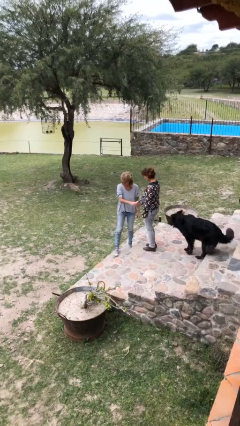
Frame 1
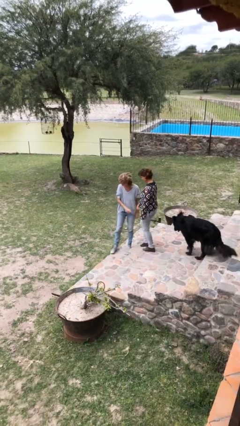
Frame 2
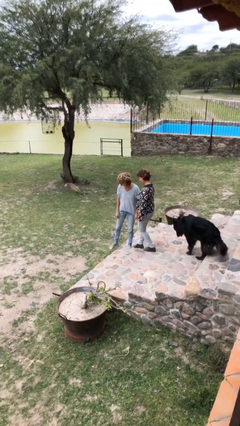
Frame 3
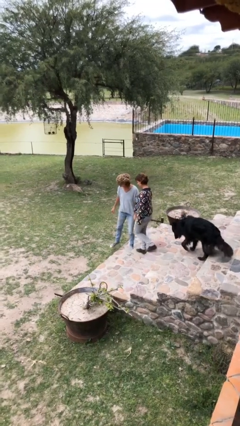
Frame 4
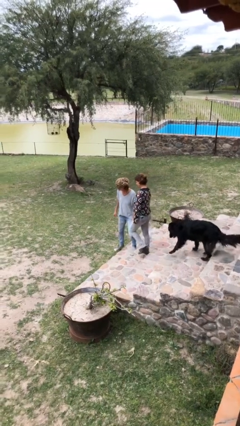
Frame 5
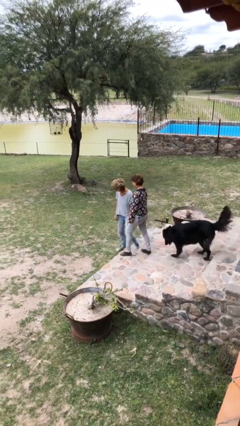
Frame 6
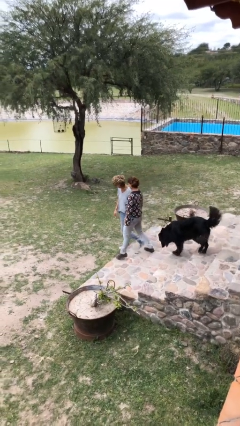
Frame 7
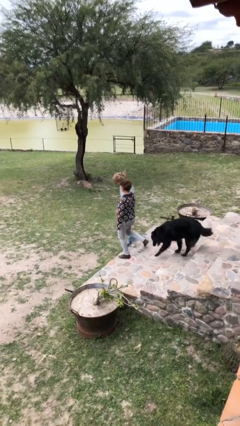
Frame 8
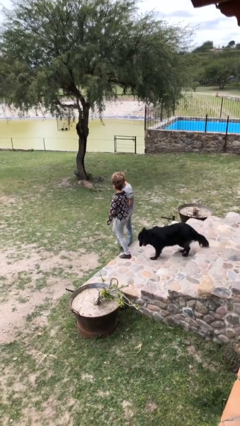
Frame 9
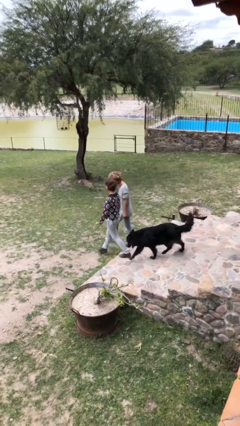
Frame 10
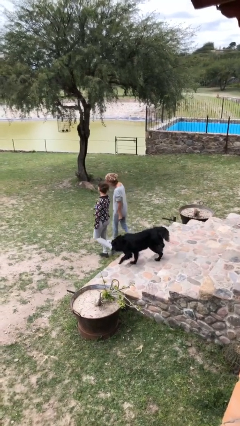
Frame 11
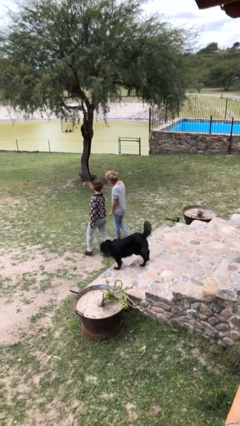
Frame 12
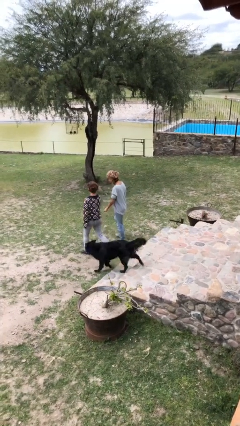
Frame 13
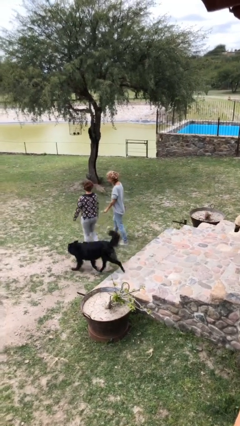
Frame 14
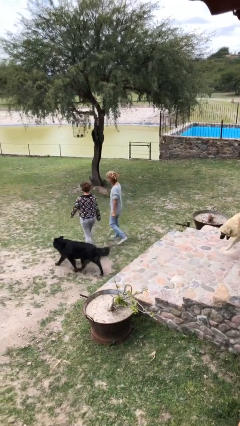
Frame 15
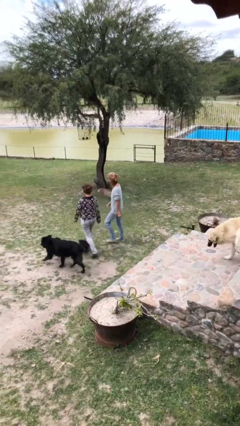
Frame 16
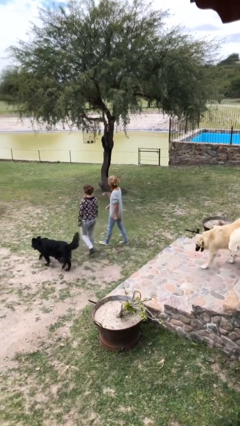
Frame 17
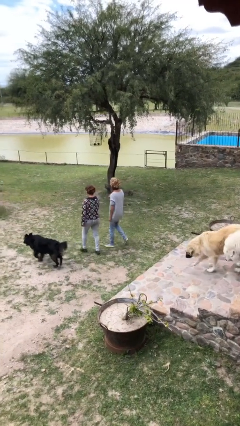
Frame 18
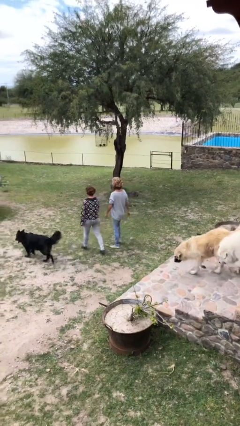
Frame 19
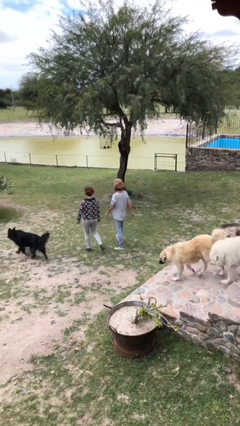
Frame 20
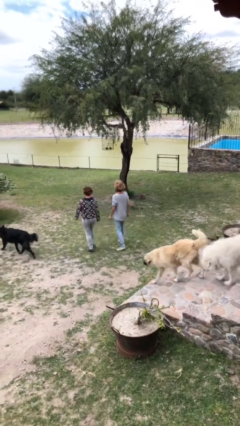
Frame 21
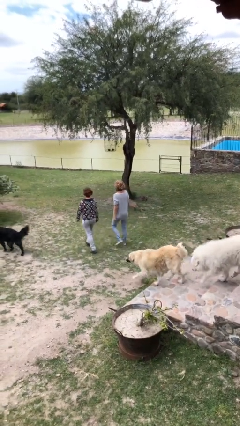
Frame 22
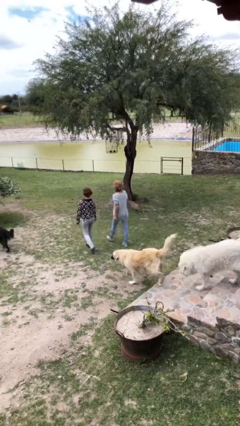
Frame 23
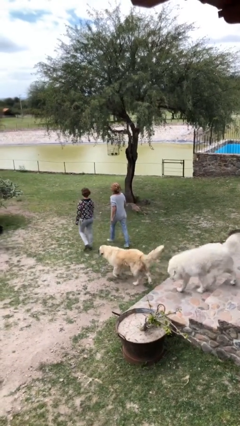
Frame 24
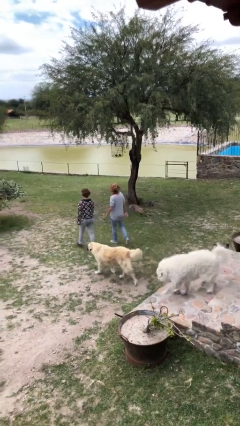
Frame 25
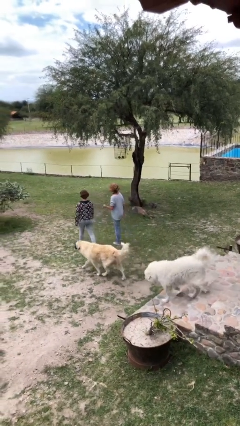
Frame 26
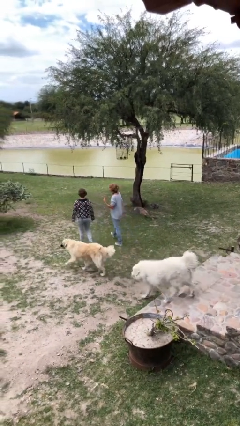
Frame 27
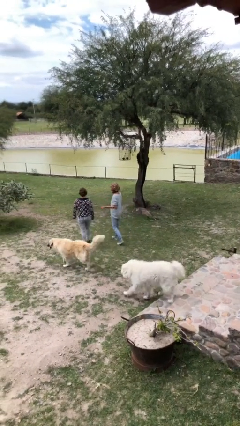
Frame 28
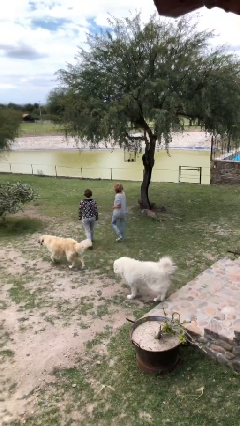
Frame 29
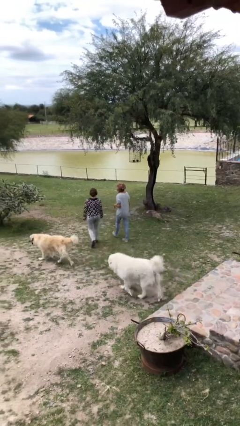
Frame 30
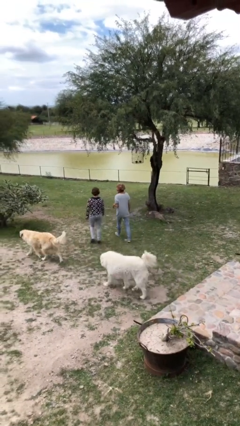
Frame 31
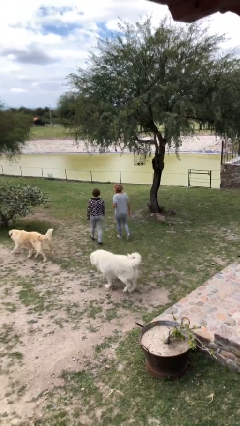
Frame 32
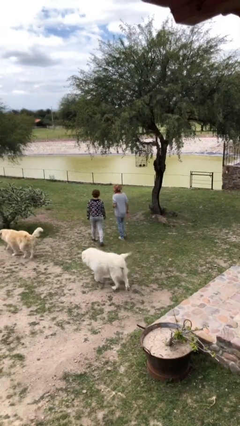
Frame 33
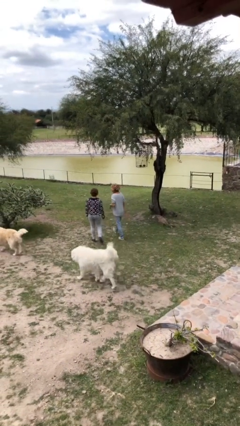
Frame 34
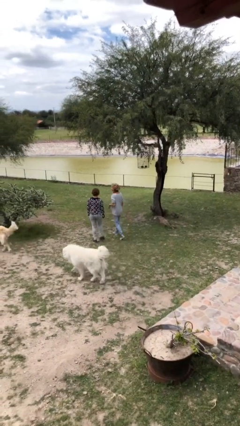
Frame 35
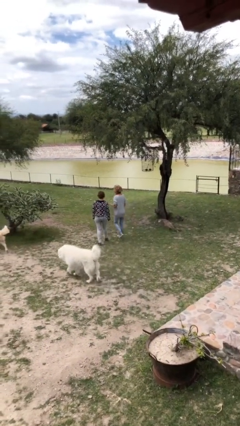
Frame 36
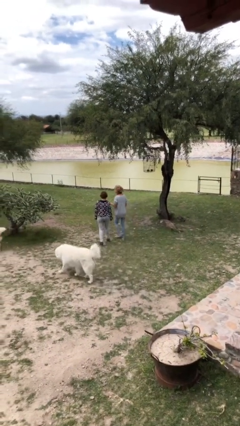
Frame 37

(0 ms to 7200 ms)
person talks to person

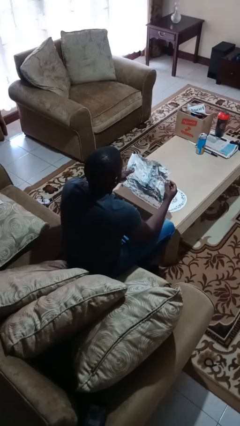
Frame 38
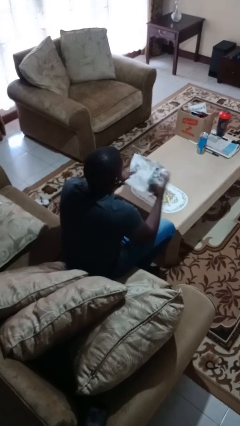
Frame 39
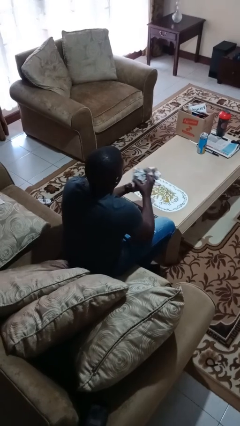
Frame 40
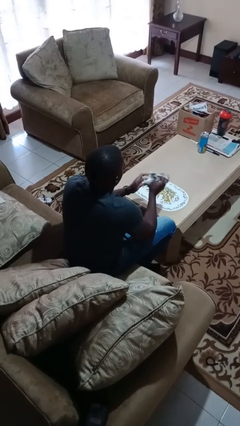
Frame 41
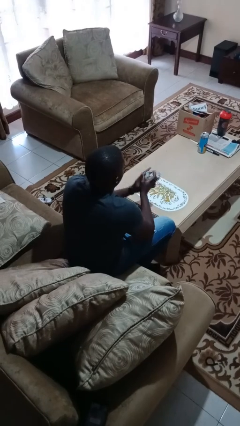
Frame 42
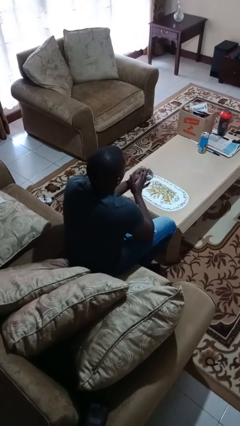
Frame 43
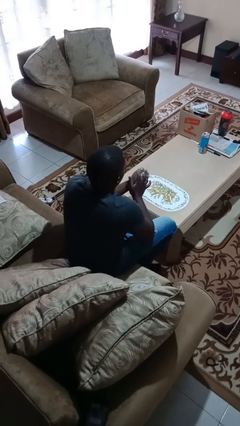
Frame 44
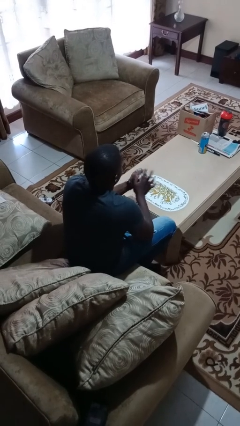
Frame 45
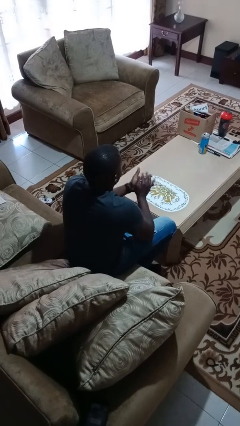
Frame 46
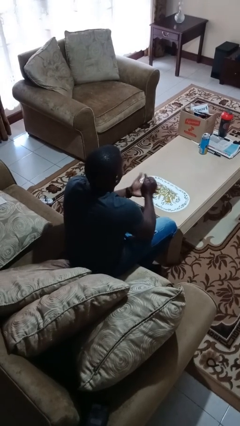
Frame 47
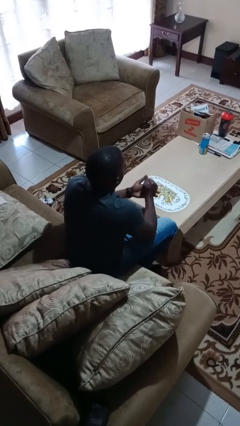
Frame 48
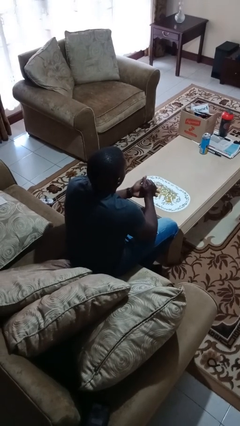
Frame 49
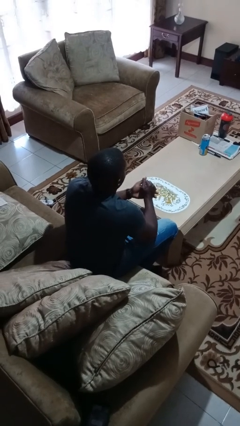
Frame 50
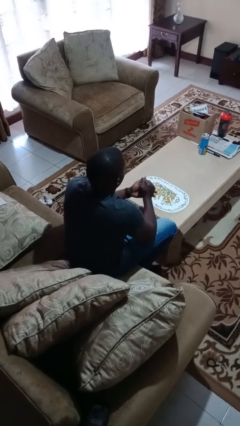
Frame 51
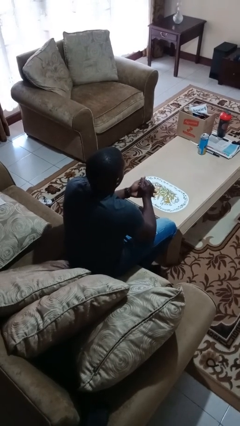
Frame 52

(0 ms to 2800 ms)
person crumples paper

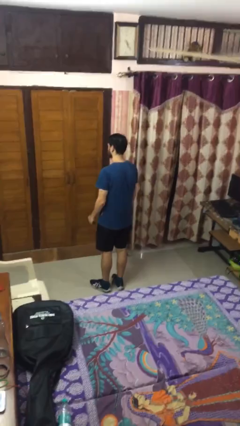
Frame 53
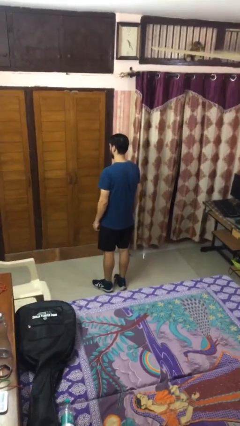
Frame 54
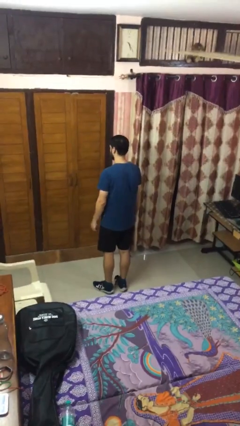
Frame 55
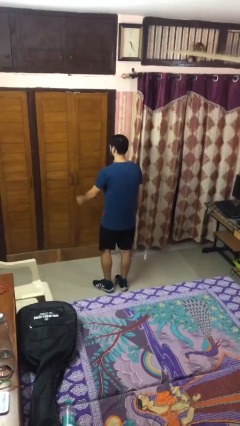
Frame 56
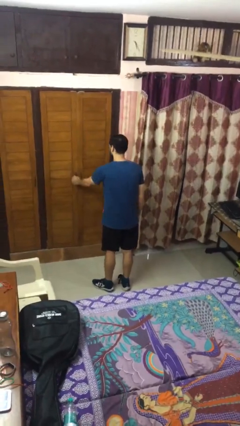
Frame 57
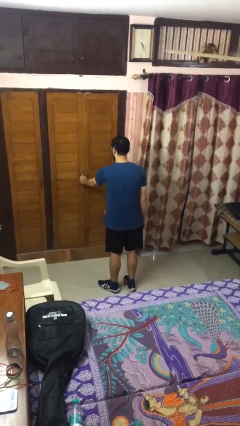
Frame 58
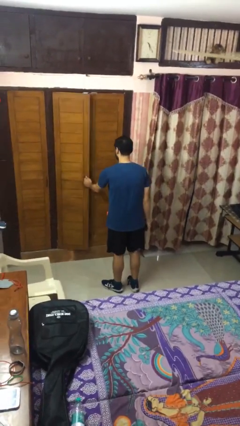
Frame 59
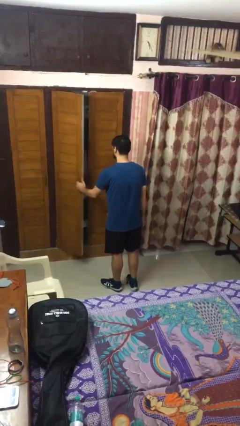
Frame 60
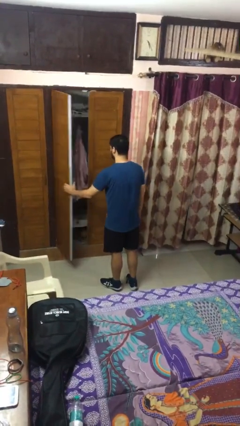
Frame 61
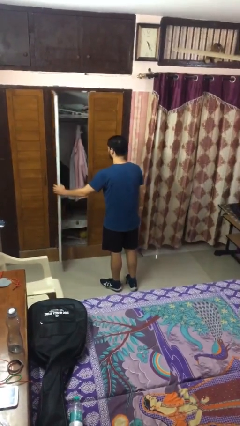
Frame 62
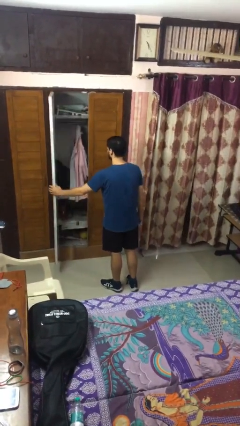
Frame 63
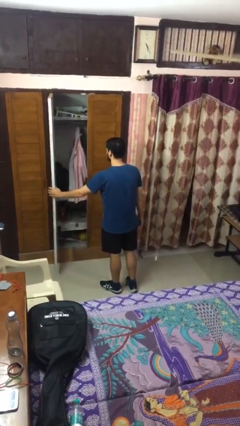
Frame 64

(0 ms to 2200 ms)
person opens closet door

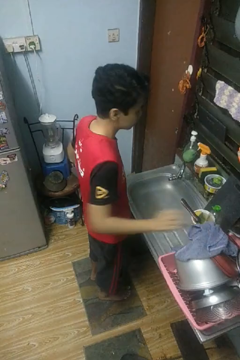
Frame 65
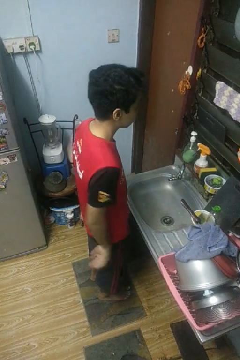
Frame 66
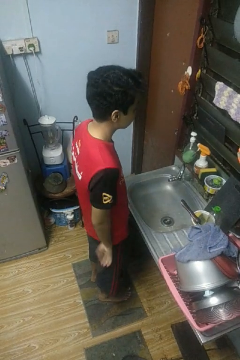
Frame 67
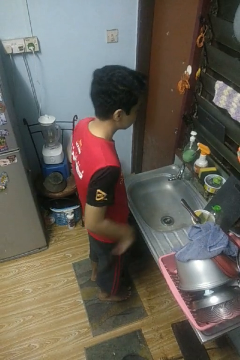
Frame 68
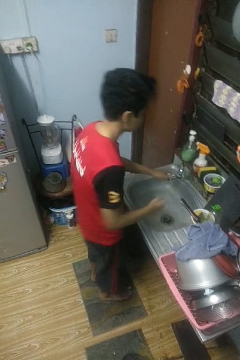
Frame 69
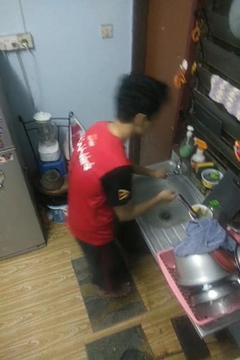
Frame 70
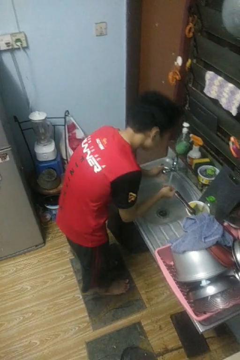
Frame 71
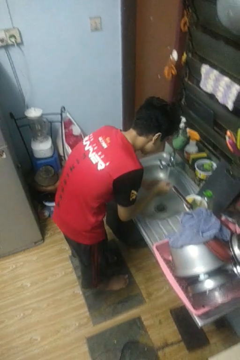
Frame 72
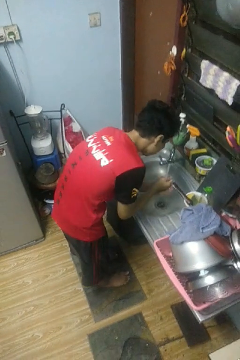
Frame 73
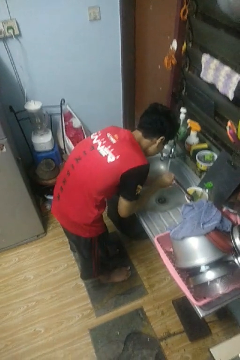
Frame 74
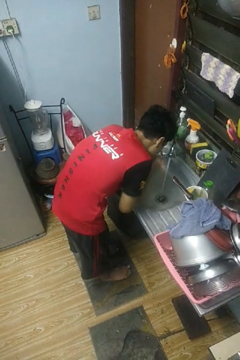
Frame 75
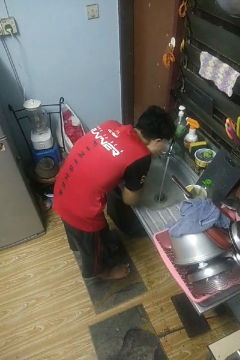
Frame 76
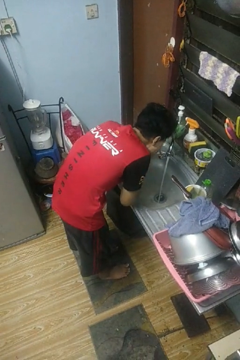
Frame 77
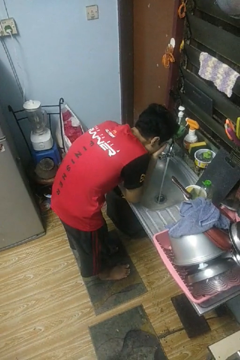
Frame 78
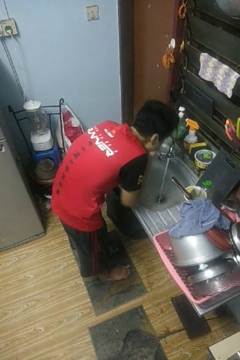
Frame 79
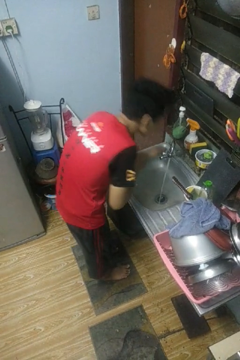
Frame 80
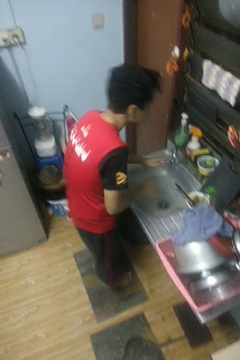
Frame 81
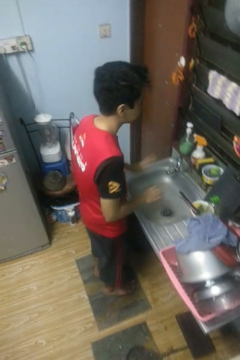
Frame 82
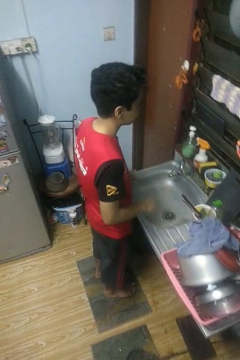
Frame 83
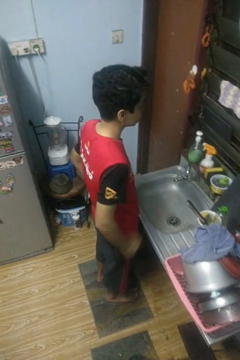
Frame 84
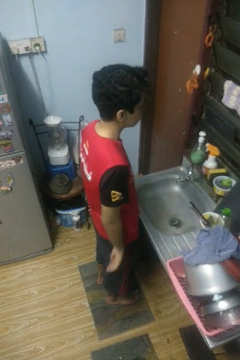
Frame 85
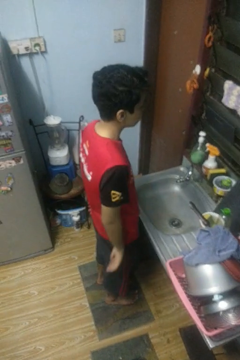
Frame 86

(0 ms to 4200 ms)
person washes face

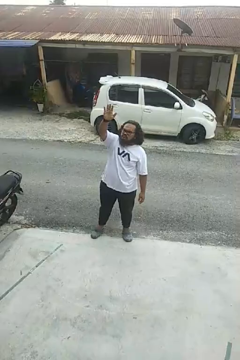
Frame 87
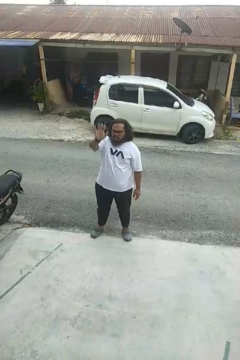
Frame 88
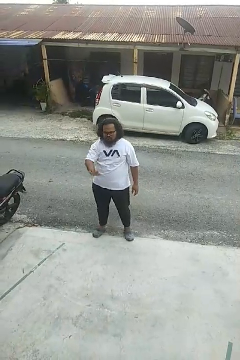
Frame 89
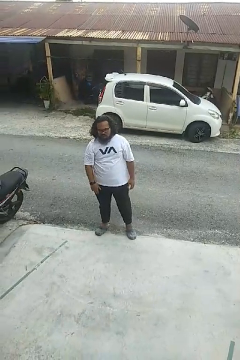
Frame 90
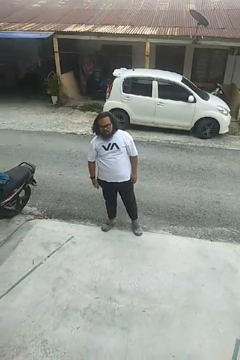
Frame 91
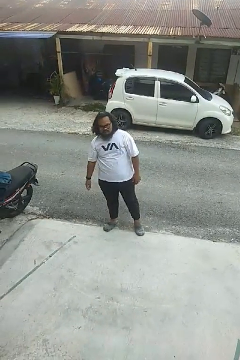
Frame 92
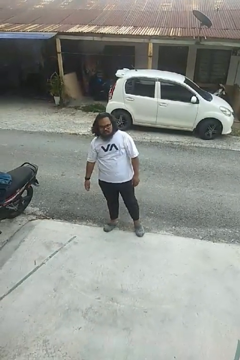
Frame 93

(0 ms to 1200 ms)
person gestures swipe down

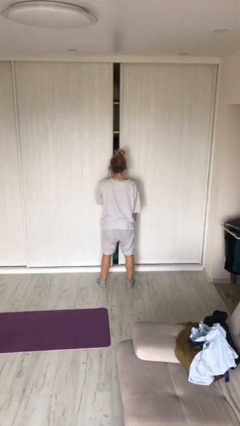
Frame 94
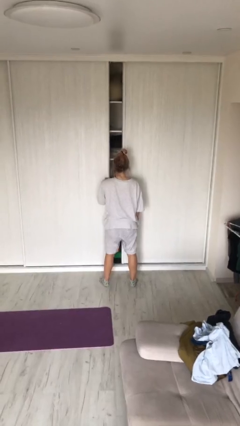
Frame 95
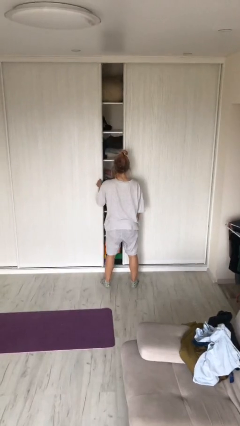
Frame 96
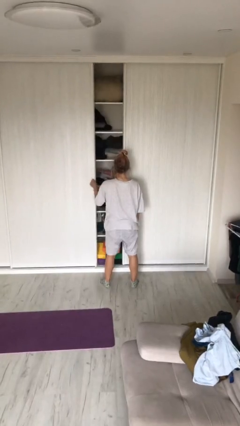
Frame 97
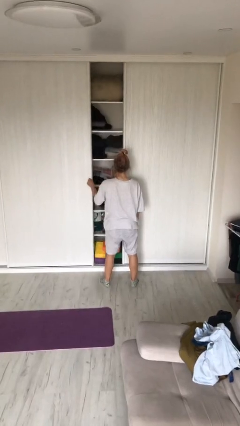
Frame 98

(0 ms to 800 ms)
person opens sliding door
